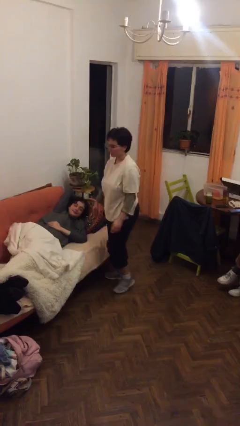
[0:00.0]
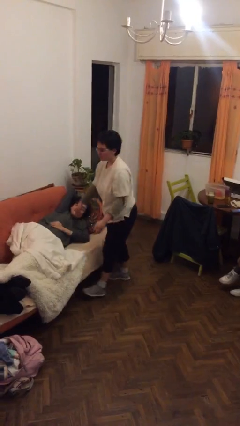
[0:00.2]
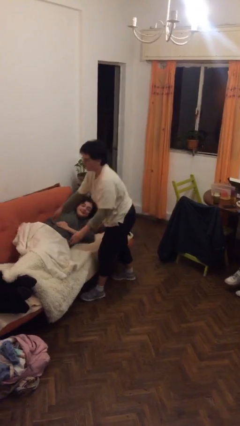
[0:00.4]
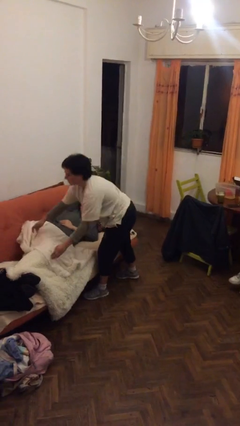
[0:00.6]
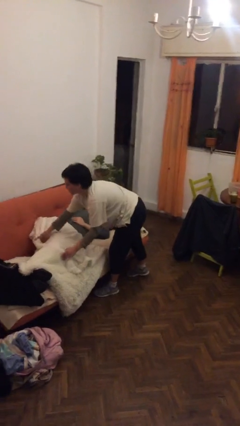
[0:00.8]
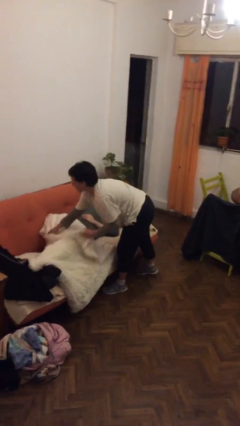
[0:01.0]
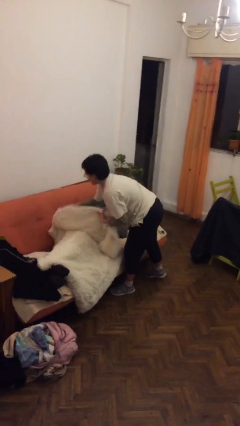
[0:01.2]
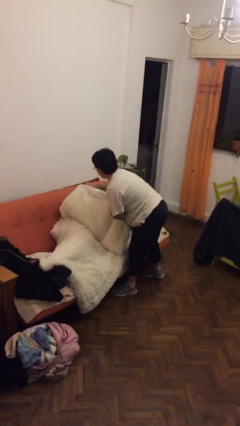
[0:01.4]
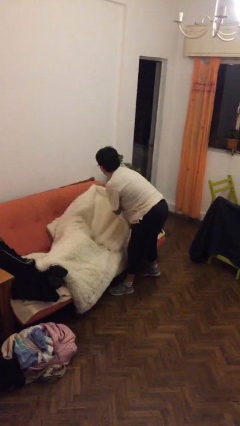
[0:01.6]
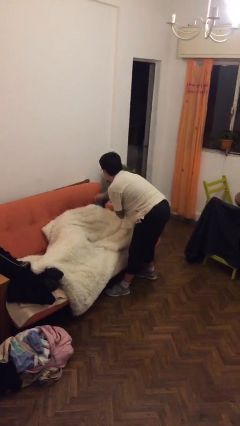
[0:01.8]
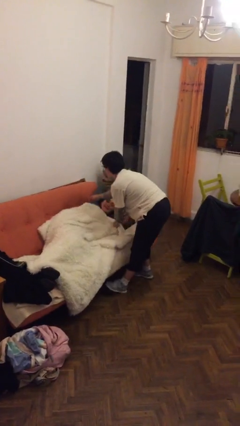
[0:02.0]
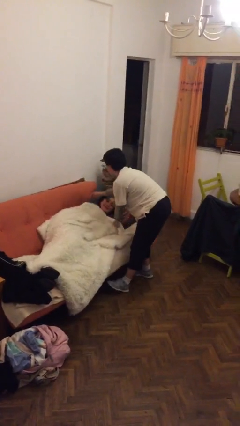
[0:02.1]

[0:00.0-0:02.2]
person covers friend with blanket

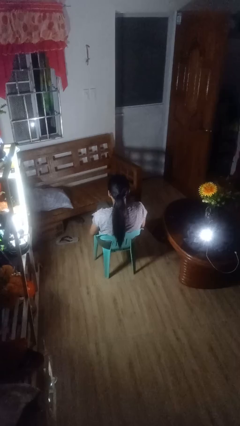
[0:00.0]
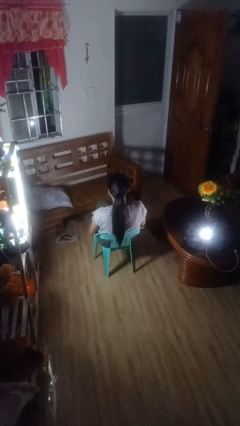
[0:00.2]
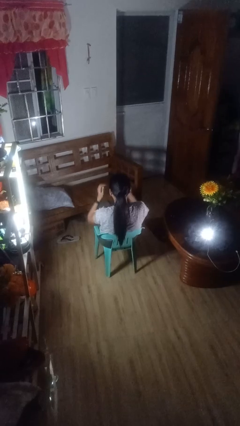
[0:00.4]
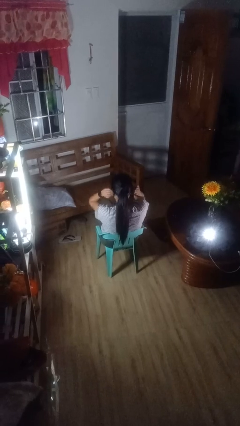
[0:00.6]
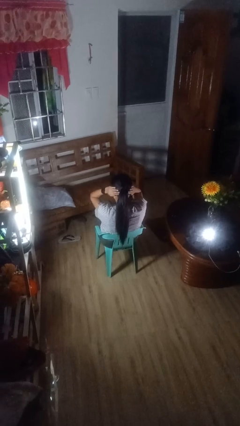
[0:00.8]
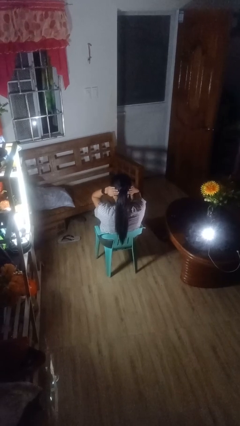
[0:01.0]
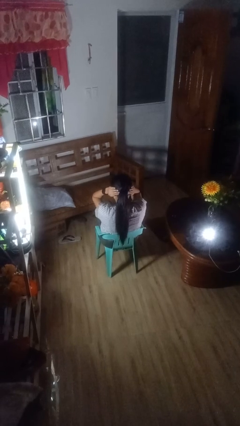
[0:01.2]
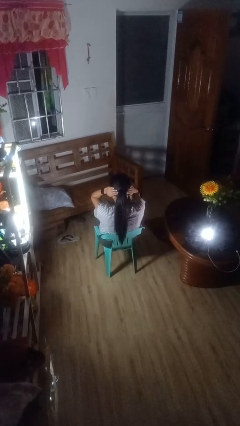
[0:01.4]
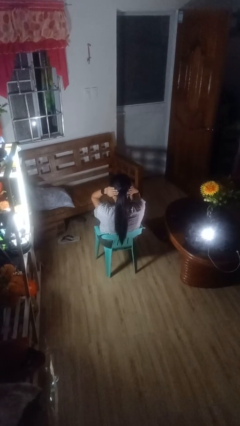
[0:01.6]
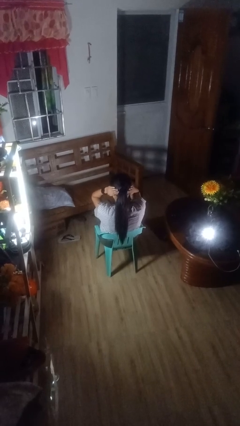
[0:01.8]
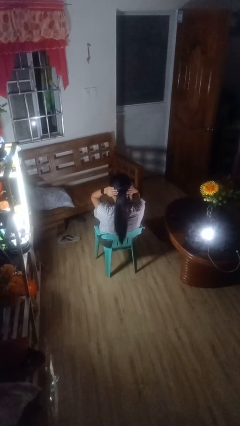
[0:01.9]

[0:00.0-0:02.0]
person puts fingers in ear

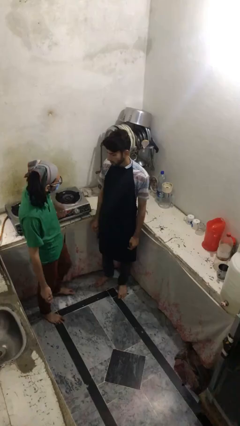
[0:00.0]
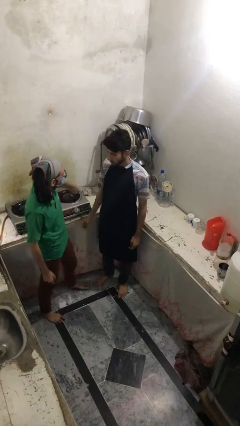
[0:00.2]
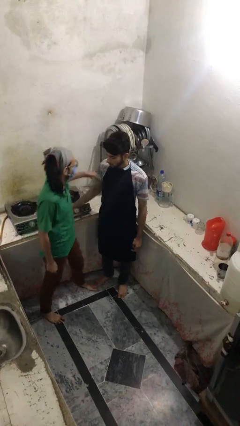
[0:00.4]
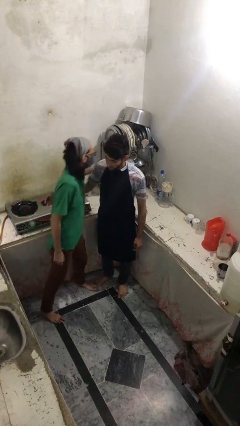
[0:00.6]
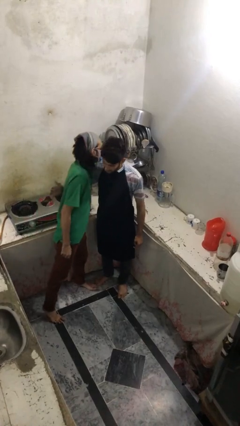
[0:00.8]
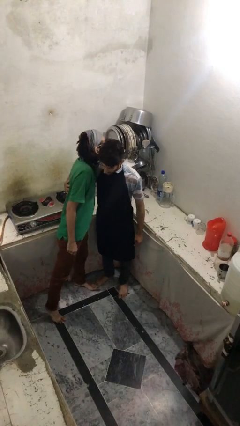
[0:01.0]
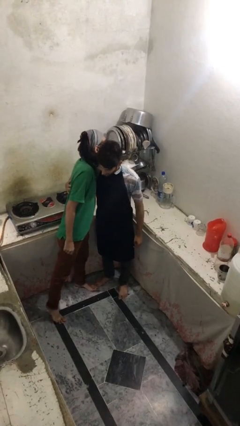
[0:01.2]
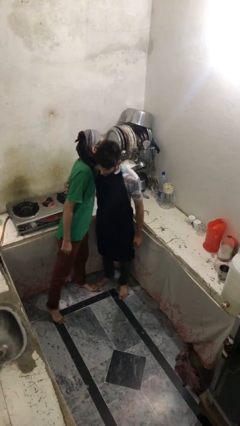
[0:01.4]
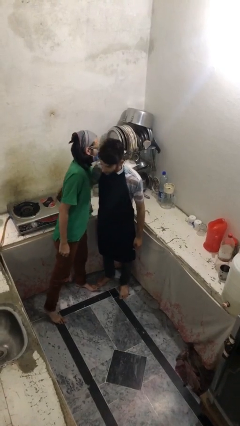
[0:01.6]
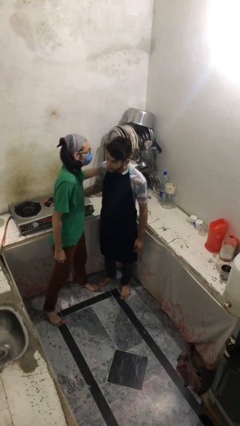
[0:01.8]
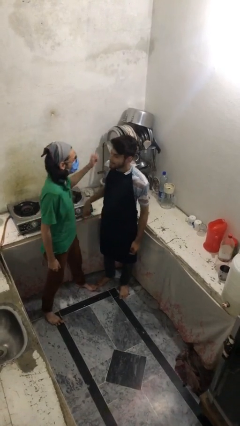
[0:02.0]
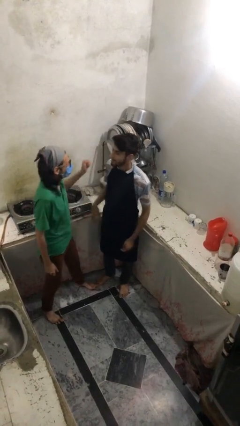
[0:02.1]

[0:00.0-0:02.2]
person embraces person

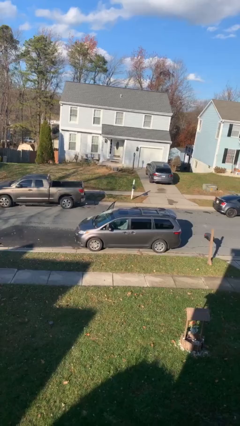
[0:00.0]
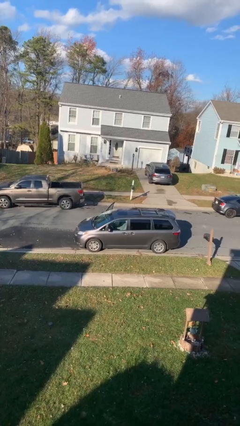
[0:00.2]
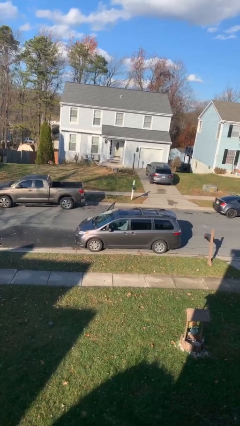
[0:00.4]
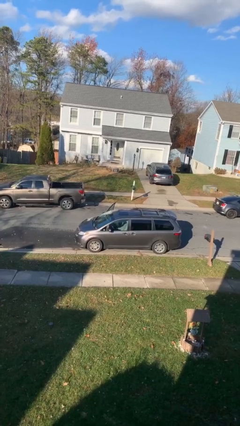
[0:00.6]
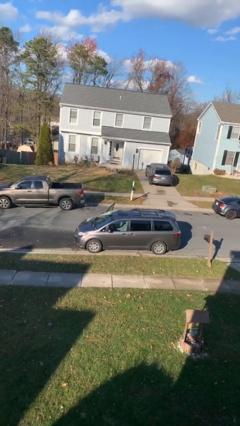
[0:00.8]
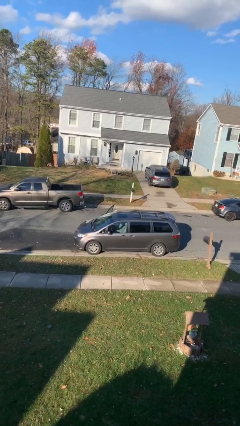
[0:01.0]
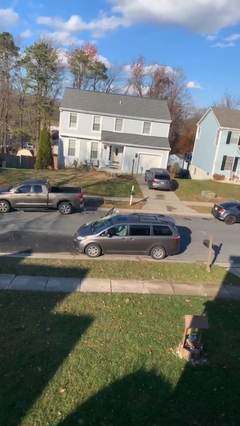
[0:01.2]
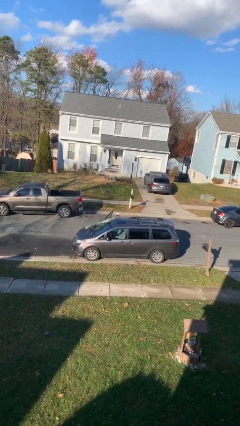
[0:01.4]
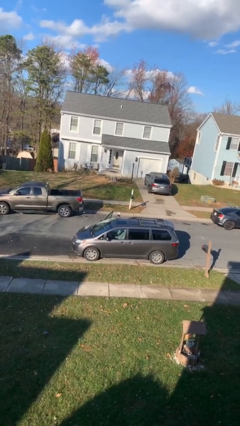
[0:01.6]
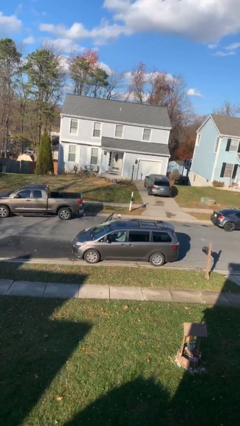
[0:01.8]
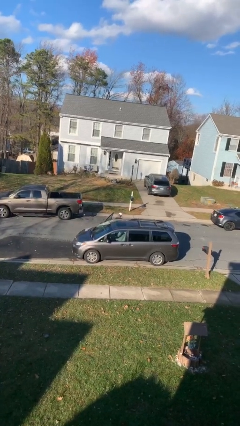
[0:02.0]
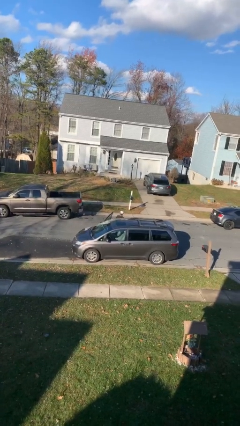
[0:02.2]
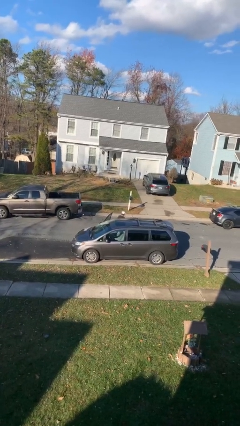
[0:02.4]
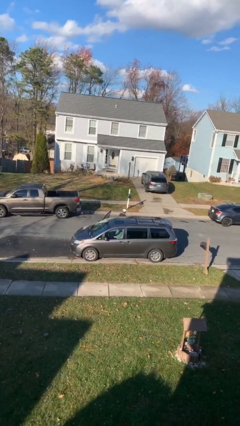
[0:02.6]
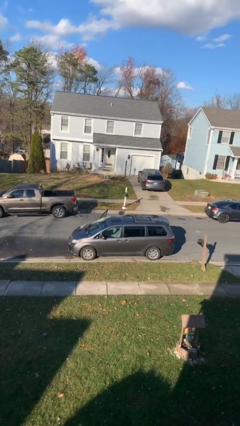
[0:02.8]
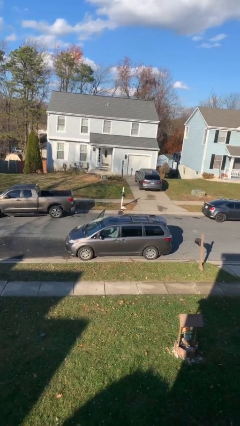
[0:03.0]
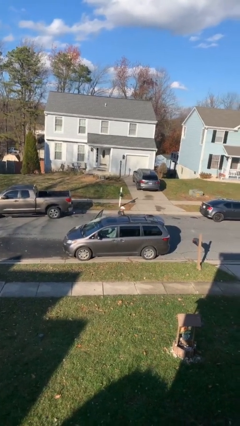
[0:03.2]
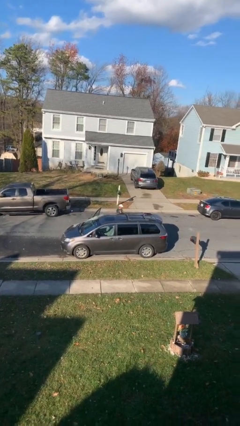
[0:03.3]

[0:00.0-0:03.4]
person exits car

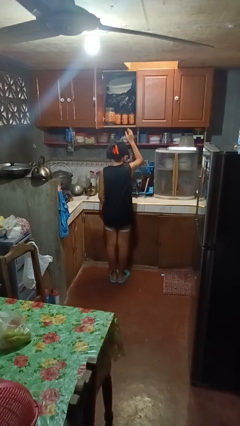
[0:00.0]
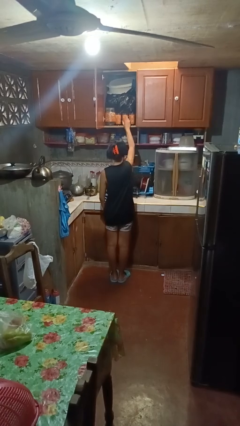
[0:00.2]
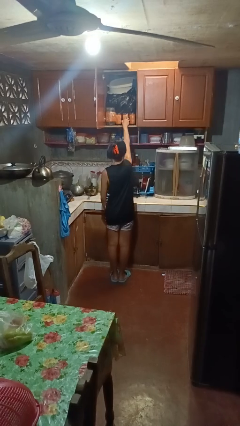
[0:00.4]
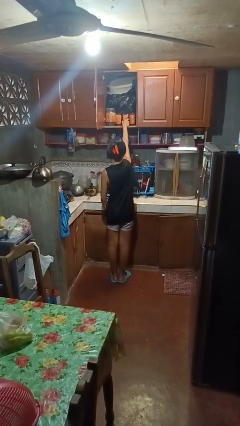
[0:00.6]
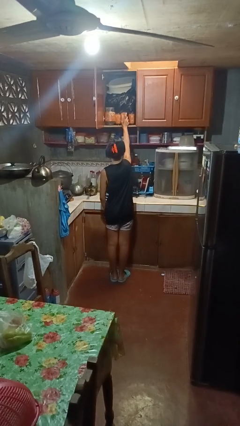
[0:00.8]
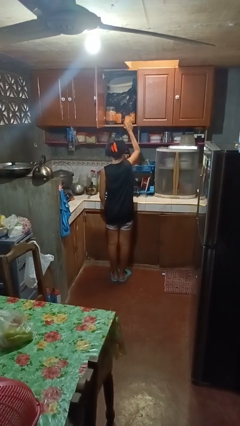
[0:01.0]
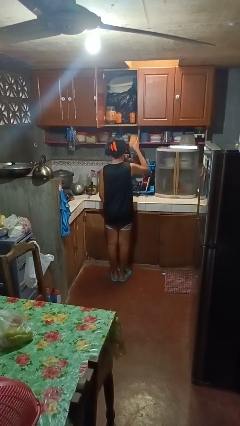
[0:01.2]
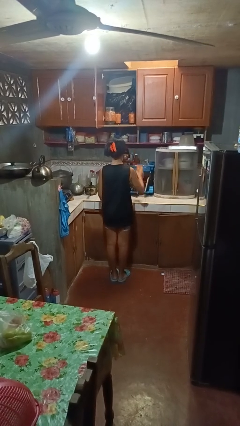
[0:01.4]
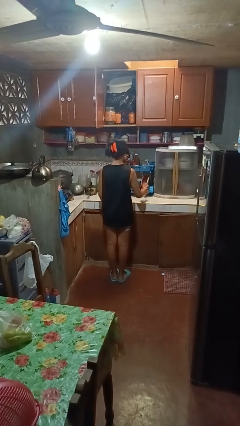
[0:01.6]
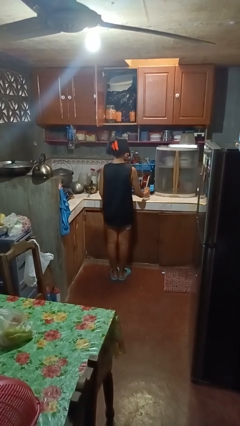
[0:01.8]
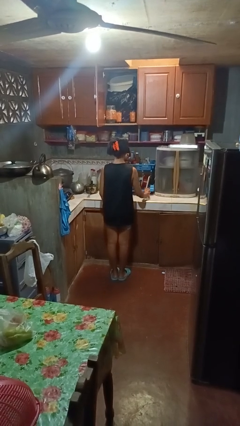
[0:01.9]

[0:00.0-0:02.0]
person takes object from cabinet

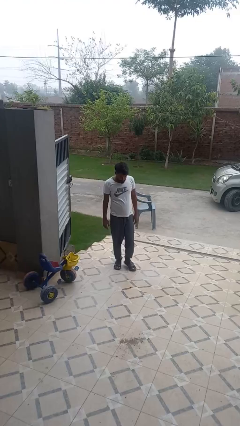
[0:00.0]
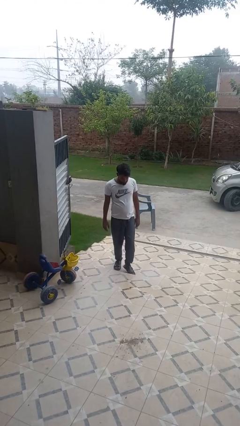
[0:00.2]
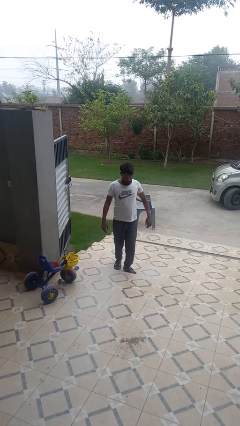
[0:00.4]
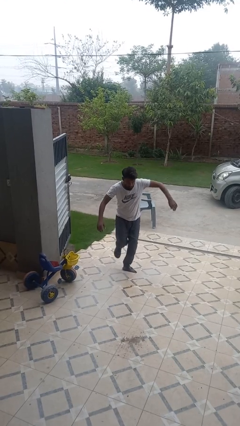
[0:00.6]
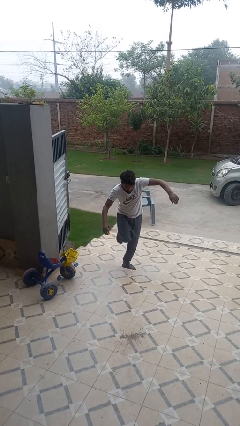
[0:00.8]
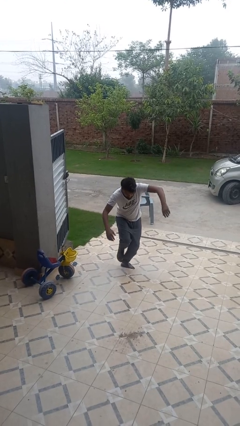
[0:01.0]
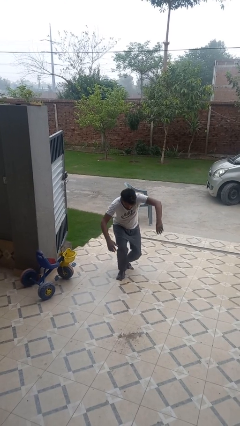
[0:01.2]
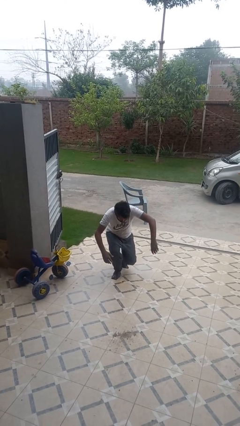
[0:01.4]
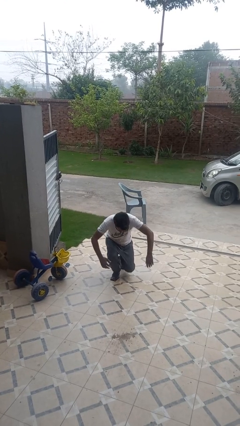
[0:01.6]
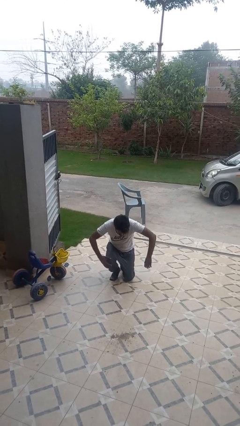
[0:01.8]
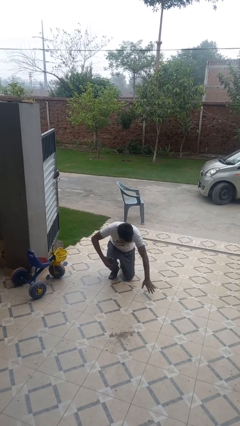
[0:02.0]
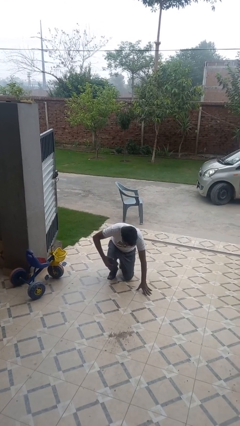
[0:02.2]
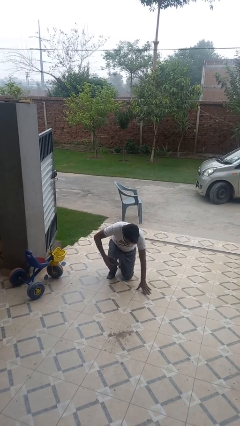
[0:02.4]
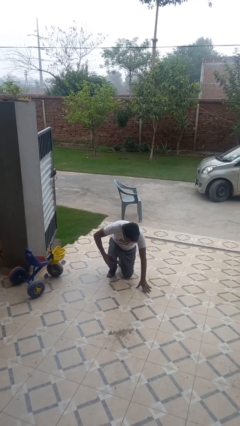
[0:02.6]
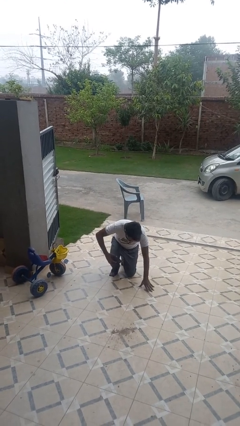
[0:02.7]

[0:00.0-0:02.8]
person trips on object on floor

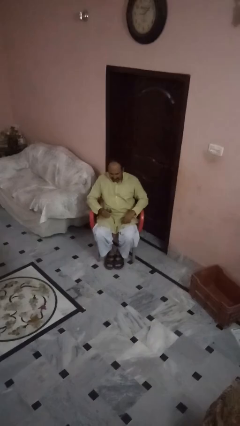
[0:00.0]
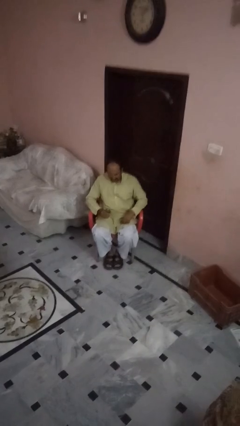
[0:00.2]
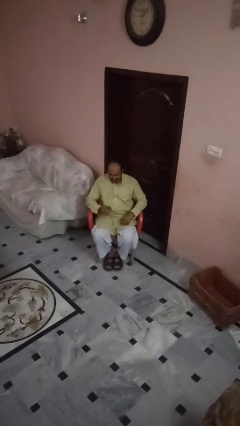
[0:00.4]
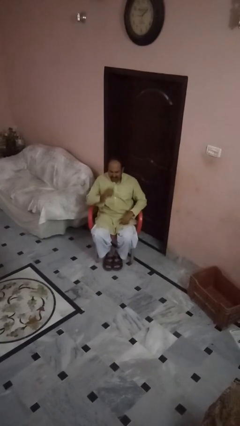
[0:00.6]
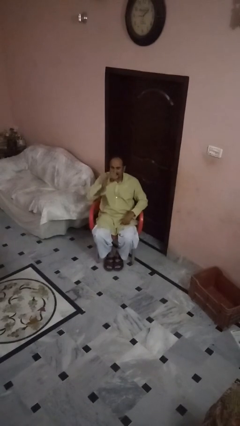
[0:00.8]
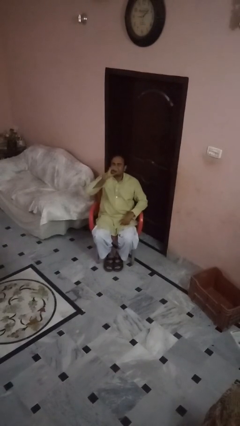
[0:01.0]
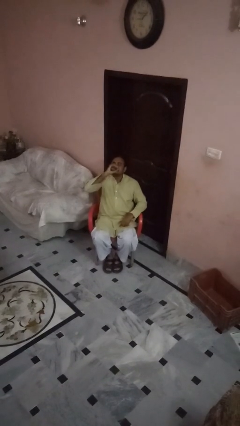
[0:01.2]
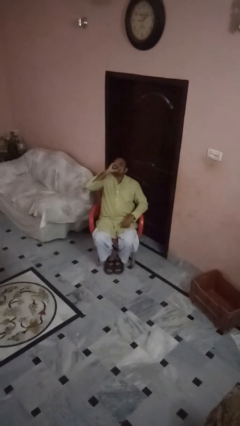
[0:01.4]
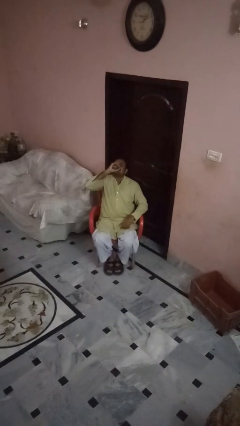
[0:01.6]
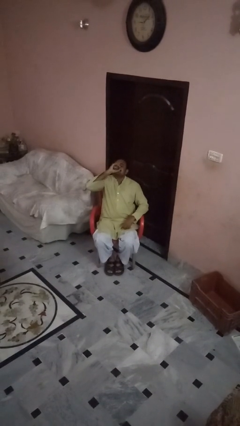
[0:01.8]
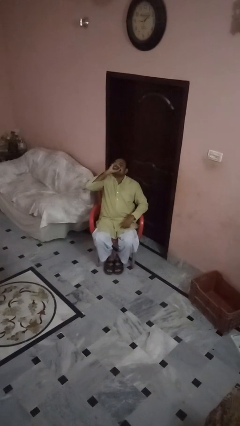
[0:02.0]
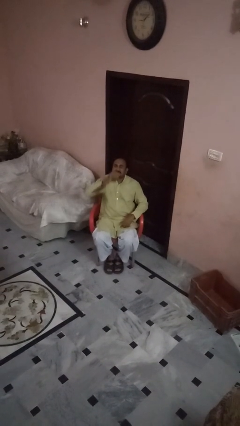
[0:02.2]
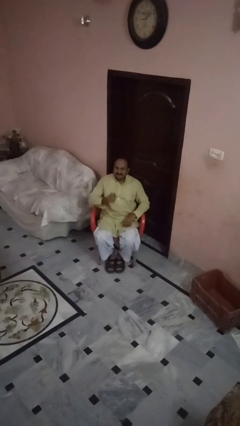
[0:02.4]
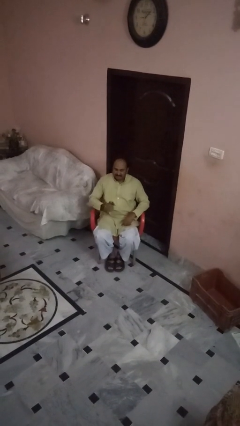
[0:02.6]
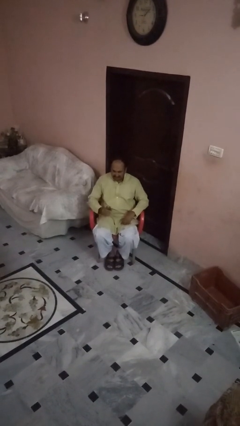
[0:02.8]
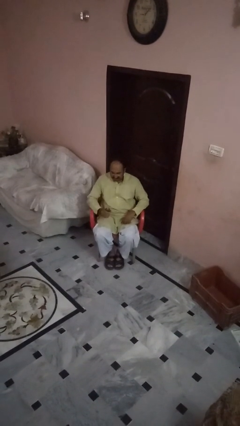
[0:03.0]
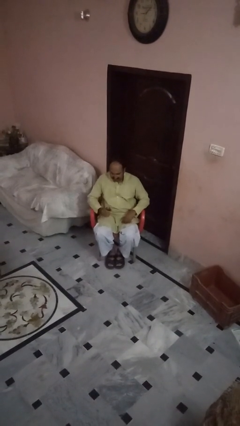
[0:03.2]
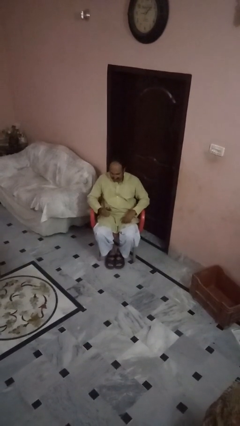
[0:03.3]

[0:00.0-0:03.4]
person drinks from beverage can
